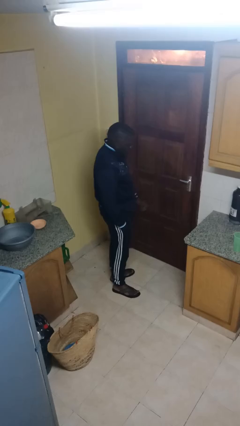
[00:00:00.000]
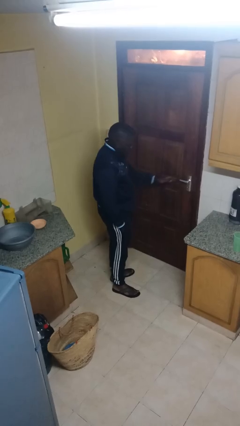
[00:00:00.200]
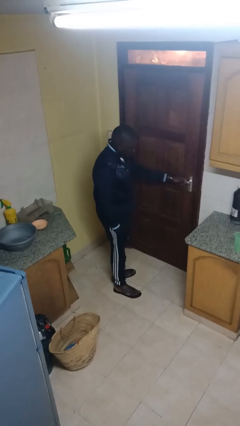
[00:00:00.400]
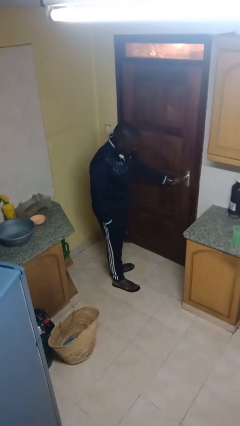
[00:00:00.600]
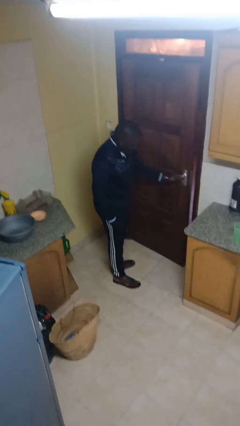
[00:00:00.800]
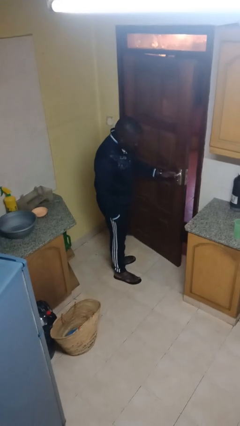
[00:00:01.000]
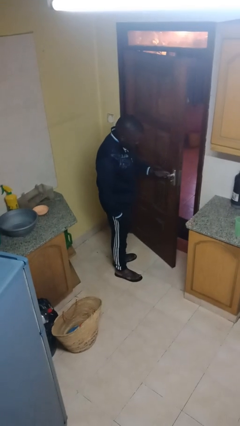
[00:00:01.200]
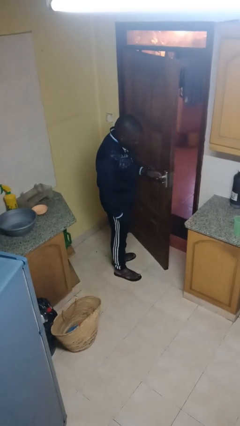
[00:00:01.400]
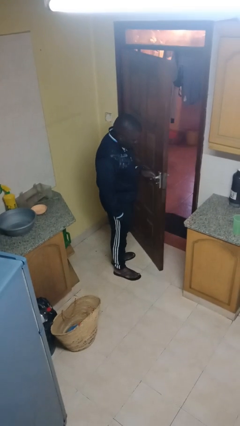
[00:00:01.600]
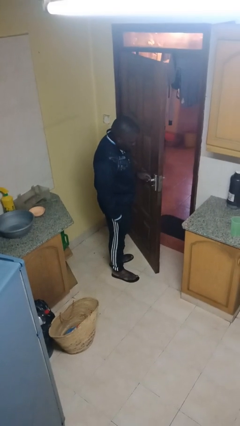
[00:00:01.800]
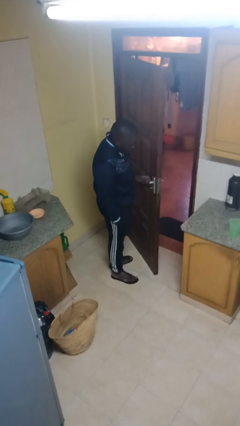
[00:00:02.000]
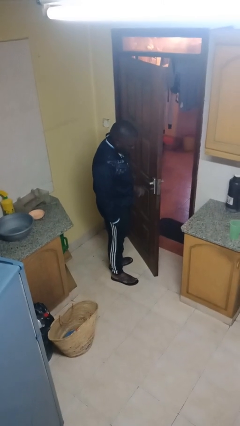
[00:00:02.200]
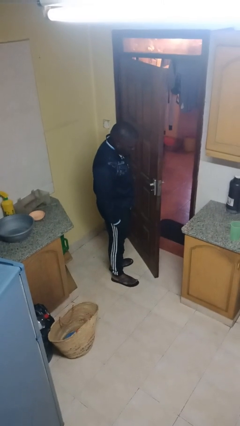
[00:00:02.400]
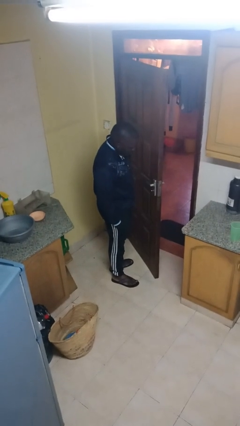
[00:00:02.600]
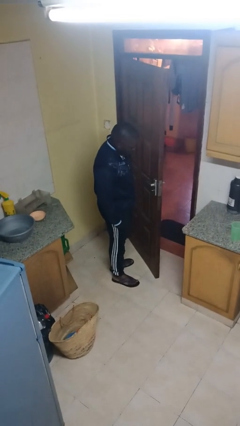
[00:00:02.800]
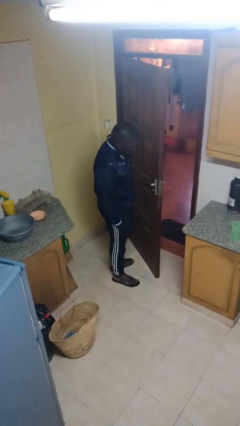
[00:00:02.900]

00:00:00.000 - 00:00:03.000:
person opens facility door

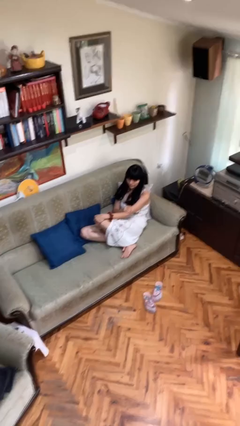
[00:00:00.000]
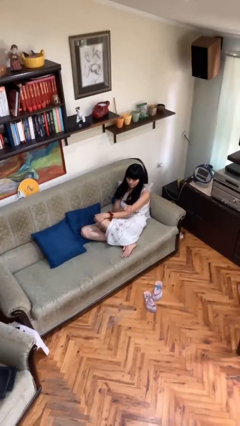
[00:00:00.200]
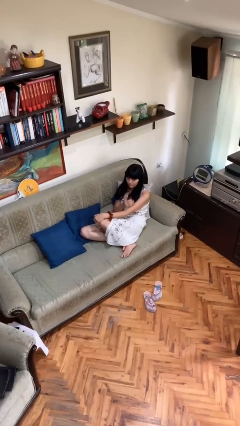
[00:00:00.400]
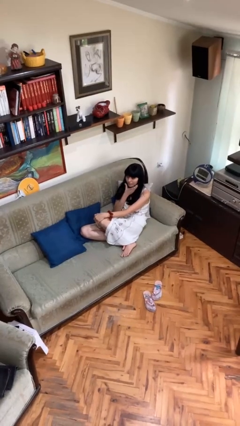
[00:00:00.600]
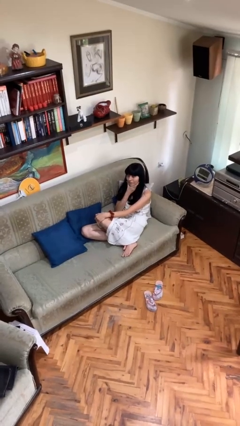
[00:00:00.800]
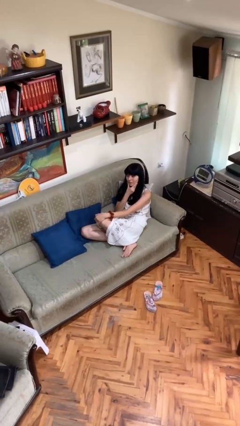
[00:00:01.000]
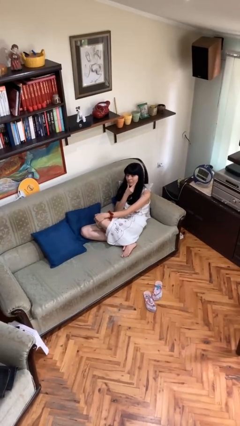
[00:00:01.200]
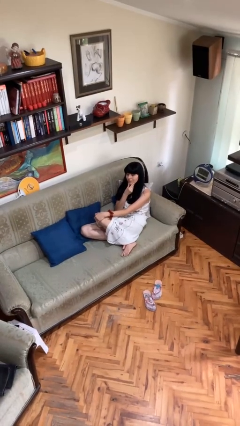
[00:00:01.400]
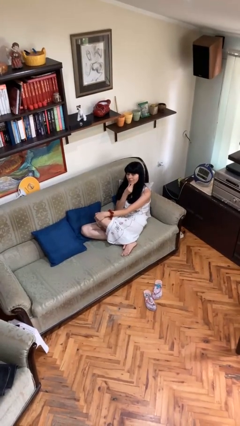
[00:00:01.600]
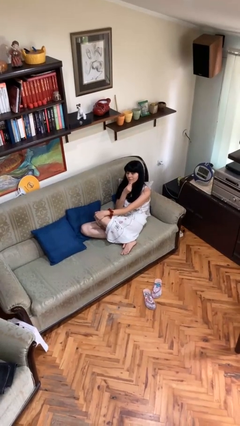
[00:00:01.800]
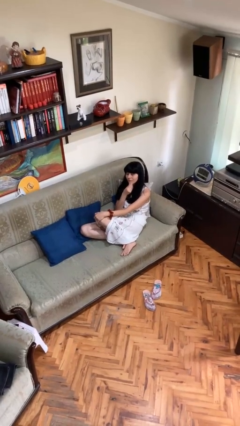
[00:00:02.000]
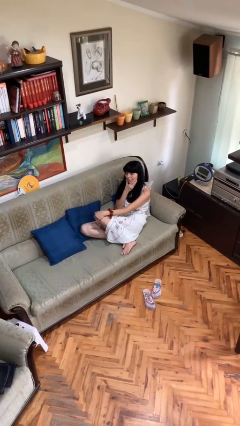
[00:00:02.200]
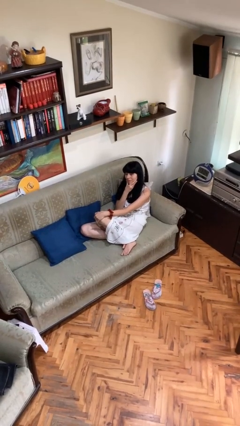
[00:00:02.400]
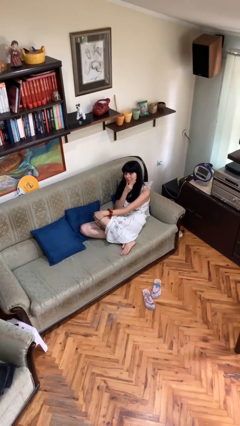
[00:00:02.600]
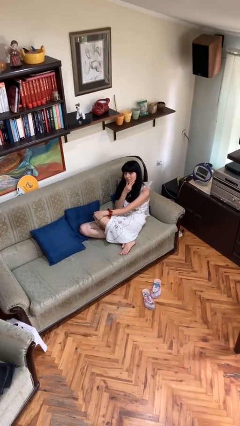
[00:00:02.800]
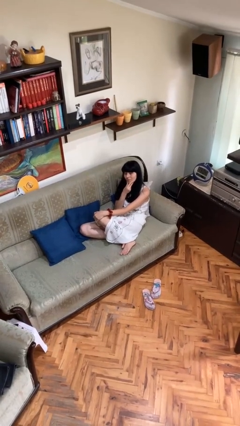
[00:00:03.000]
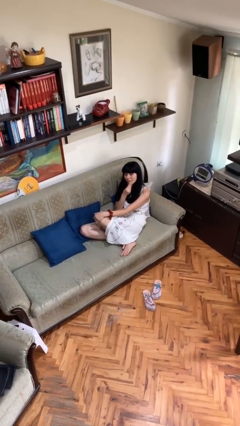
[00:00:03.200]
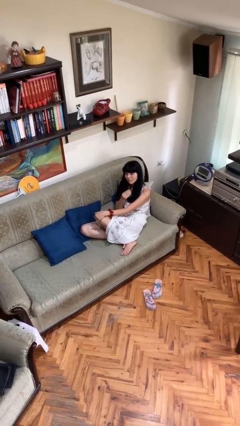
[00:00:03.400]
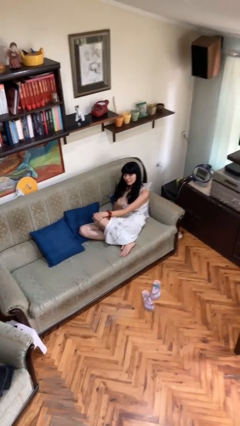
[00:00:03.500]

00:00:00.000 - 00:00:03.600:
person strokes chin

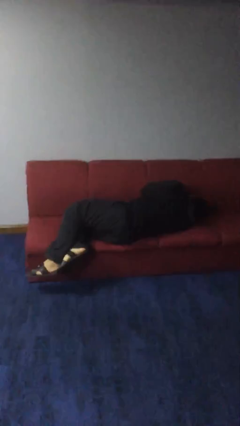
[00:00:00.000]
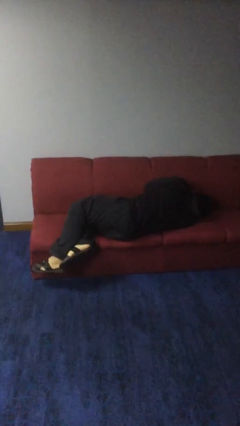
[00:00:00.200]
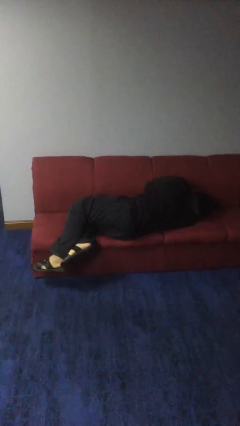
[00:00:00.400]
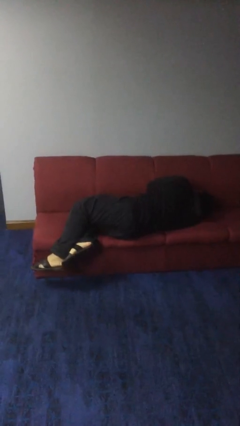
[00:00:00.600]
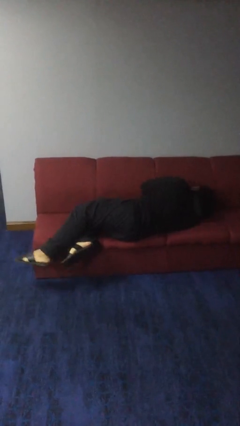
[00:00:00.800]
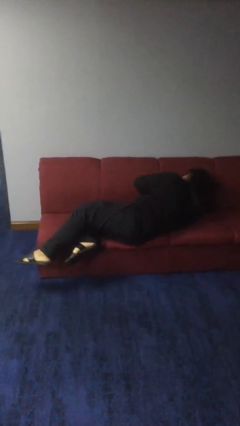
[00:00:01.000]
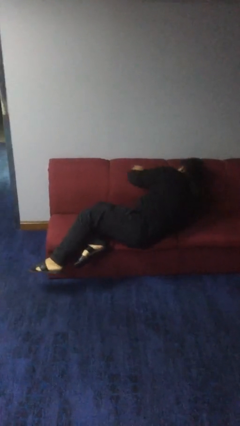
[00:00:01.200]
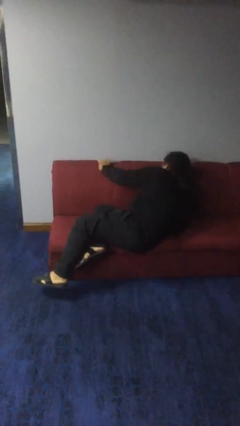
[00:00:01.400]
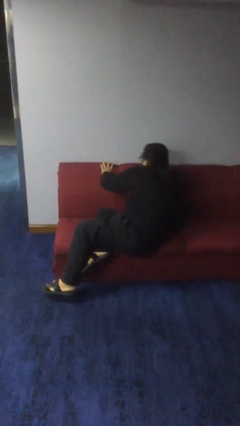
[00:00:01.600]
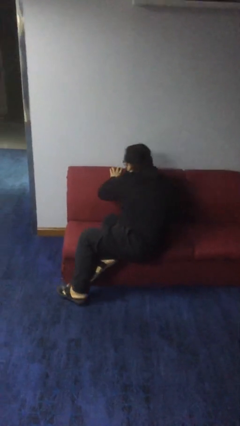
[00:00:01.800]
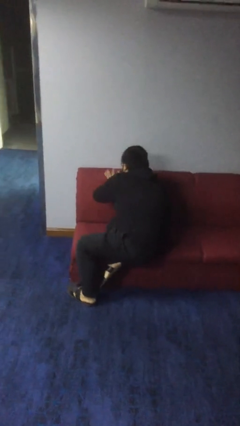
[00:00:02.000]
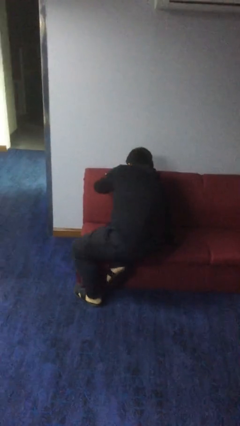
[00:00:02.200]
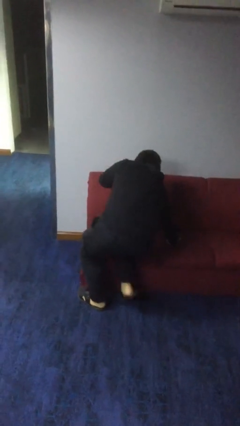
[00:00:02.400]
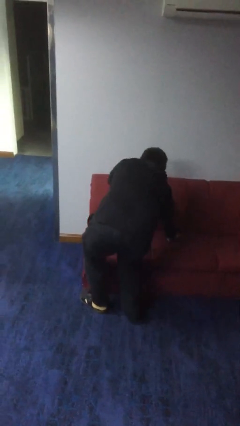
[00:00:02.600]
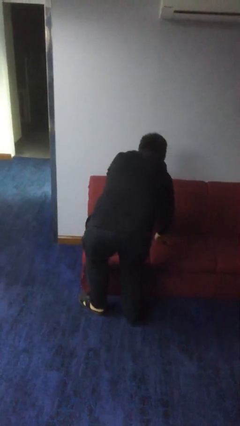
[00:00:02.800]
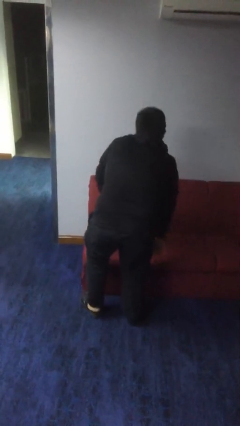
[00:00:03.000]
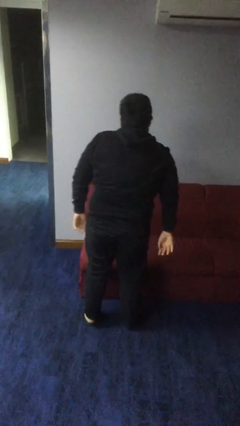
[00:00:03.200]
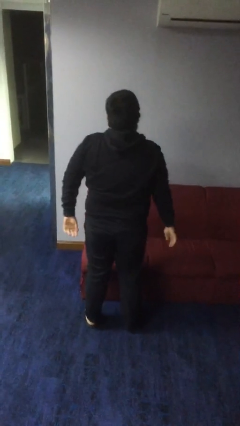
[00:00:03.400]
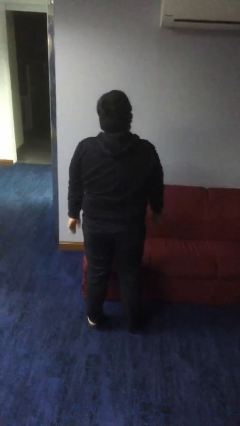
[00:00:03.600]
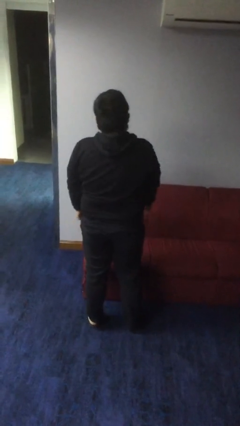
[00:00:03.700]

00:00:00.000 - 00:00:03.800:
person stands up

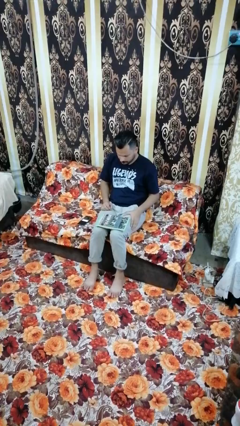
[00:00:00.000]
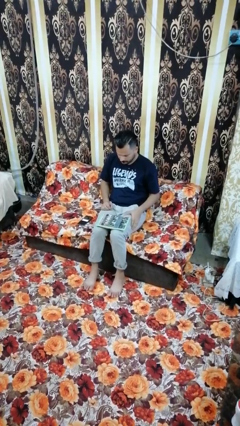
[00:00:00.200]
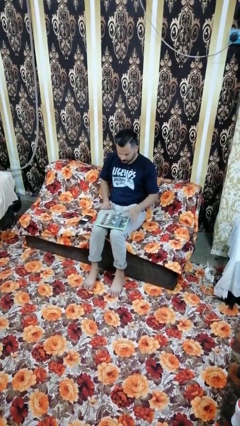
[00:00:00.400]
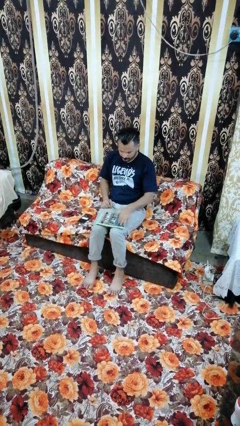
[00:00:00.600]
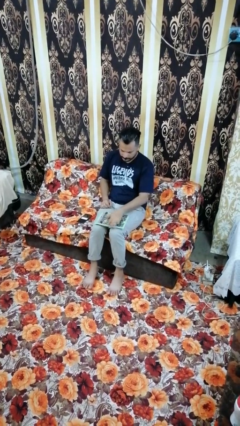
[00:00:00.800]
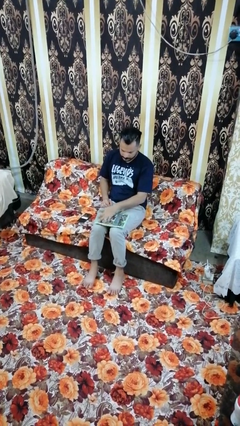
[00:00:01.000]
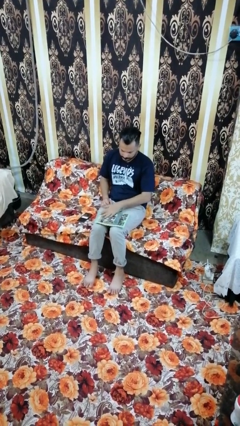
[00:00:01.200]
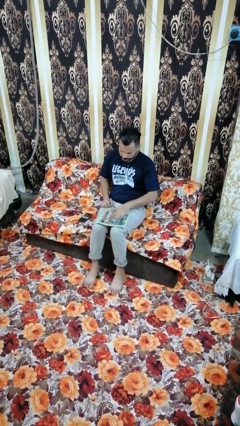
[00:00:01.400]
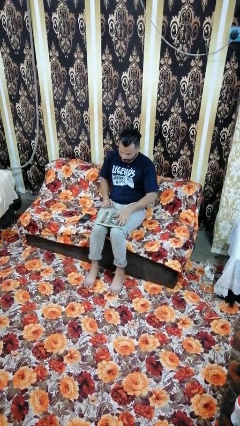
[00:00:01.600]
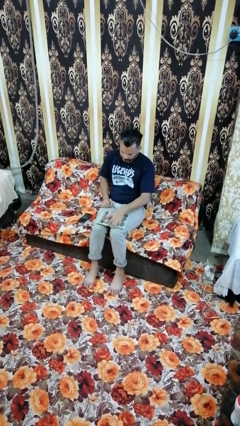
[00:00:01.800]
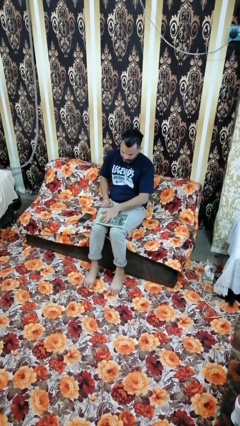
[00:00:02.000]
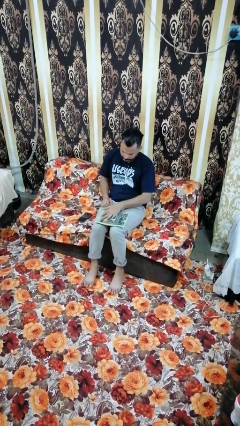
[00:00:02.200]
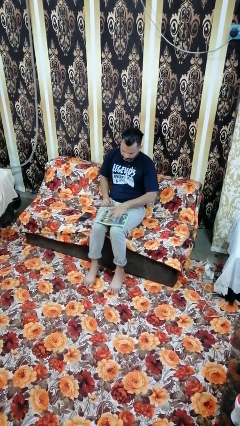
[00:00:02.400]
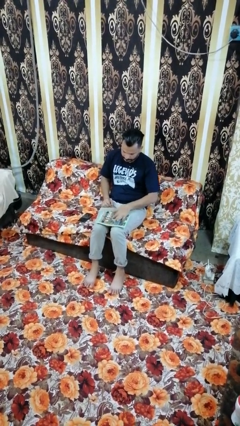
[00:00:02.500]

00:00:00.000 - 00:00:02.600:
person waves hand over object

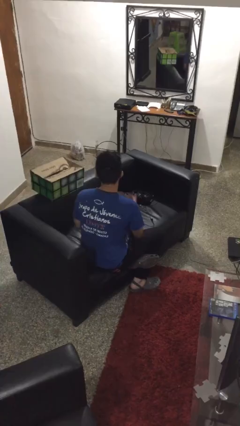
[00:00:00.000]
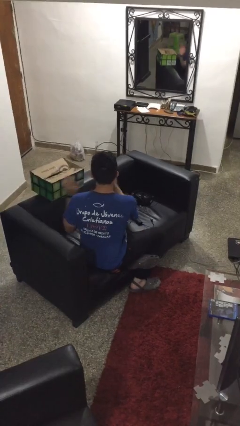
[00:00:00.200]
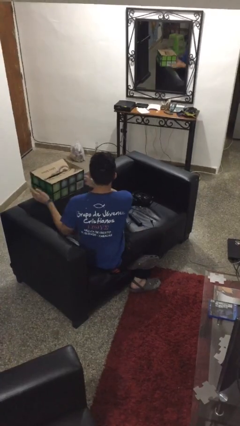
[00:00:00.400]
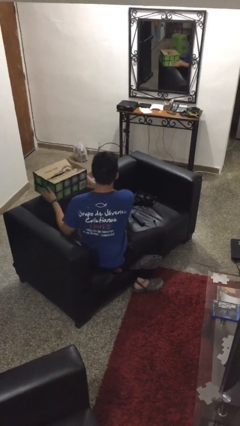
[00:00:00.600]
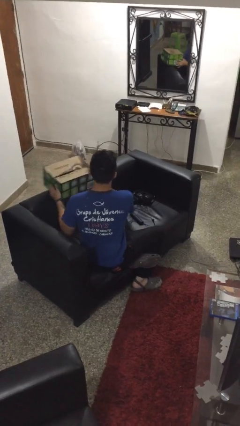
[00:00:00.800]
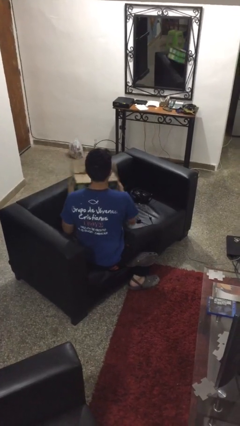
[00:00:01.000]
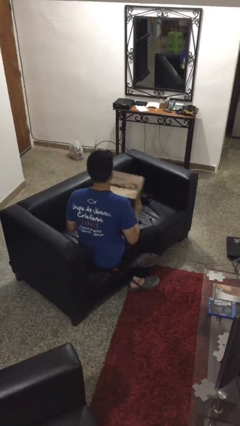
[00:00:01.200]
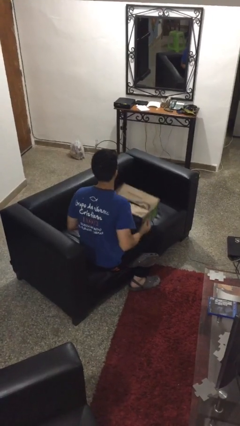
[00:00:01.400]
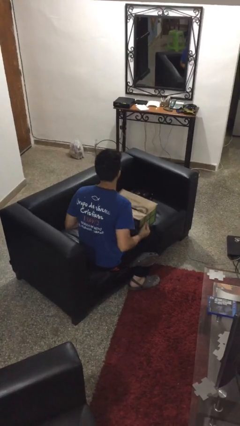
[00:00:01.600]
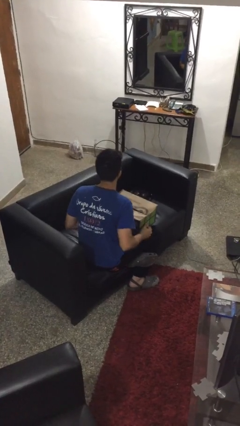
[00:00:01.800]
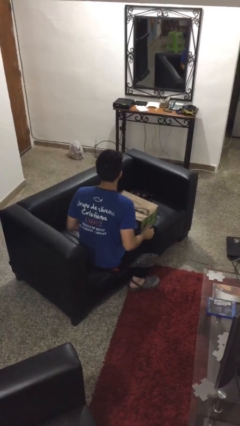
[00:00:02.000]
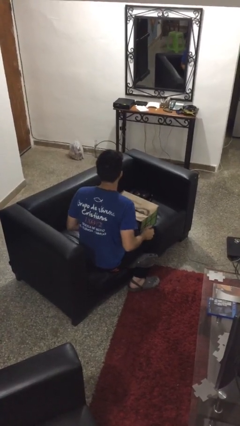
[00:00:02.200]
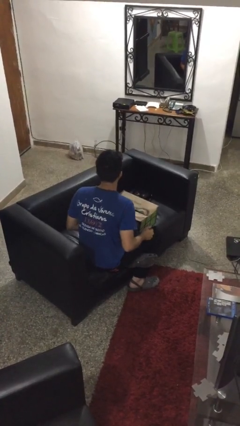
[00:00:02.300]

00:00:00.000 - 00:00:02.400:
person picks up object from couch

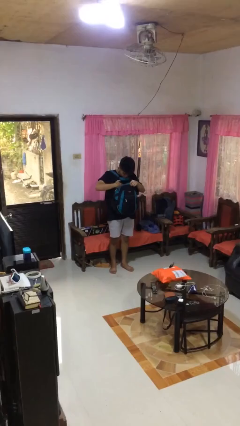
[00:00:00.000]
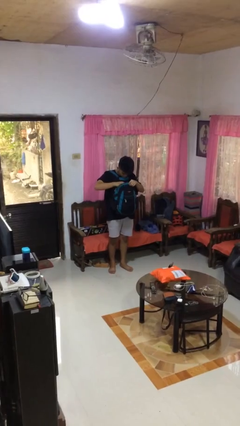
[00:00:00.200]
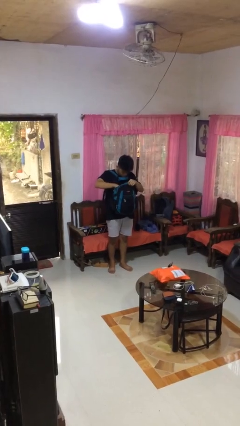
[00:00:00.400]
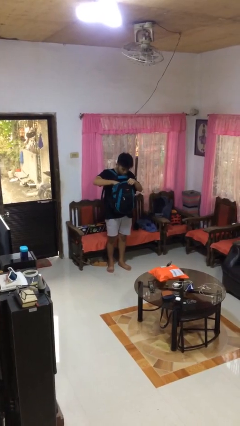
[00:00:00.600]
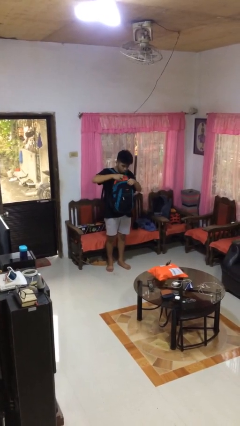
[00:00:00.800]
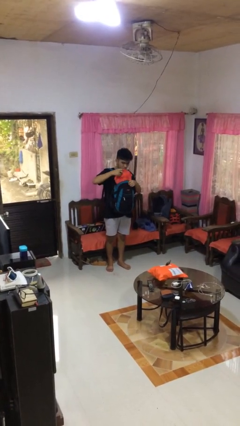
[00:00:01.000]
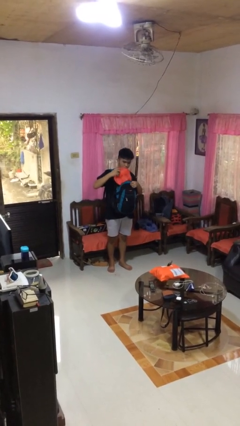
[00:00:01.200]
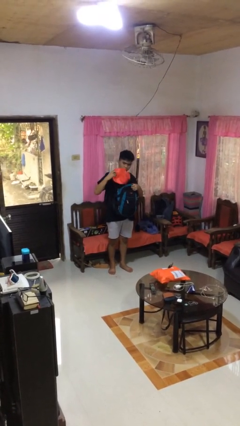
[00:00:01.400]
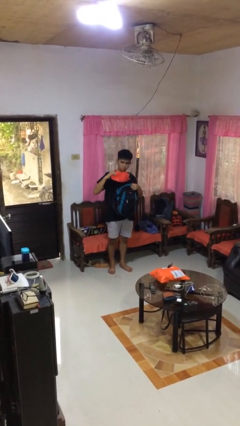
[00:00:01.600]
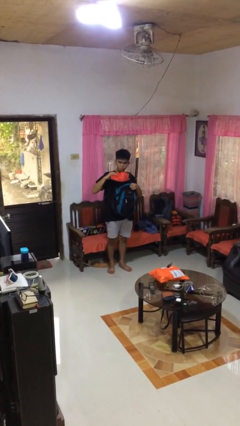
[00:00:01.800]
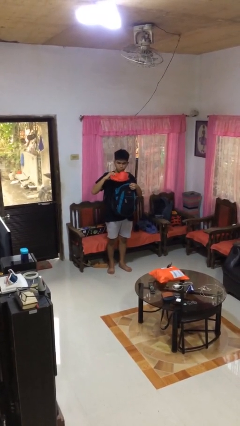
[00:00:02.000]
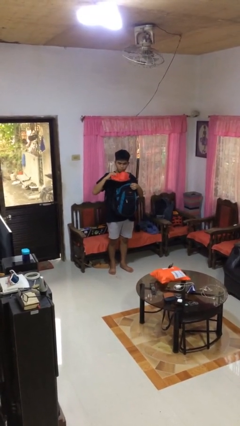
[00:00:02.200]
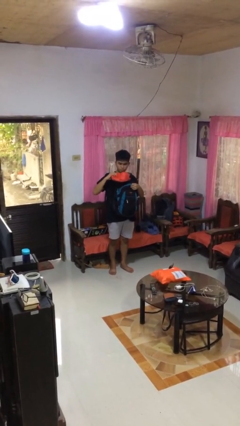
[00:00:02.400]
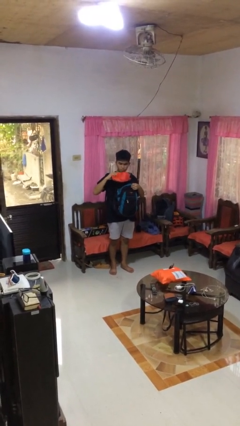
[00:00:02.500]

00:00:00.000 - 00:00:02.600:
person takes object from backpack
